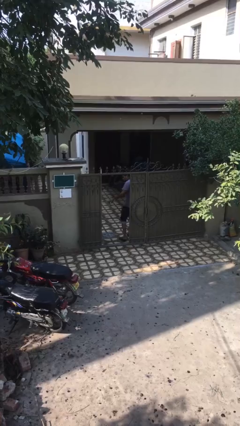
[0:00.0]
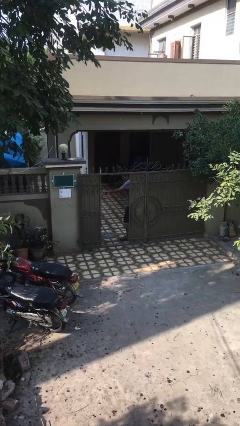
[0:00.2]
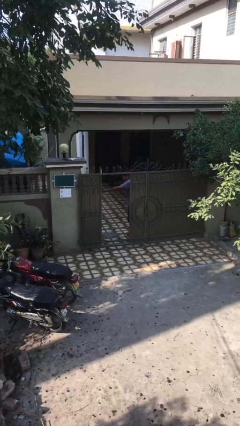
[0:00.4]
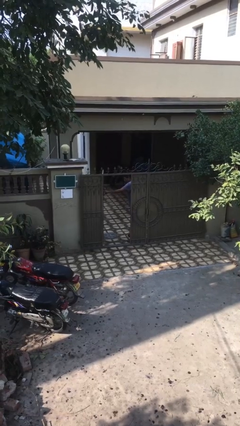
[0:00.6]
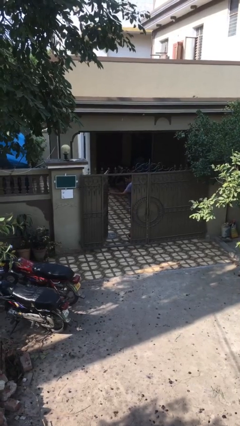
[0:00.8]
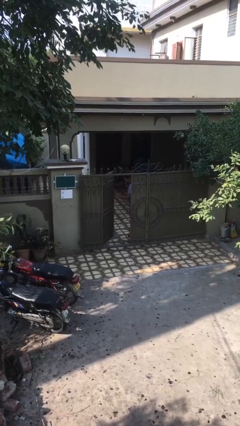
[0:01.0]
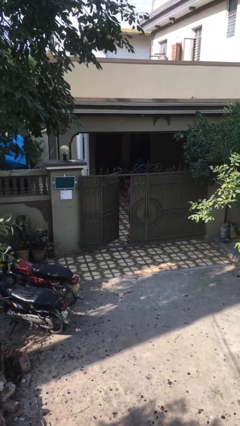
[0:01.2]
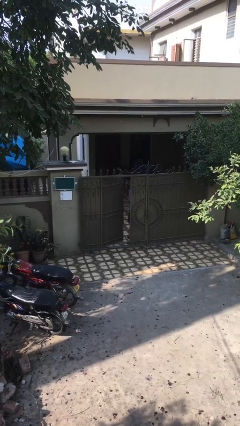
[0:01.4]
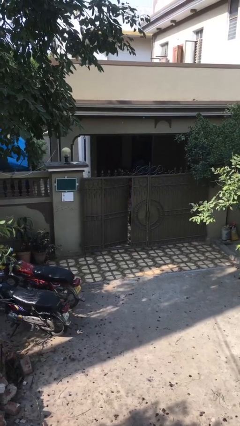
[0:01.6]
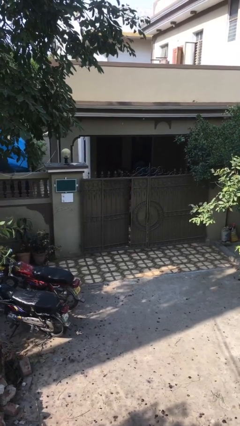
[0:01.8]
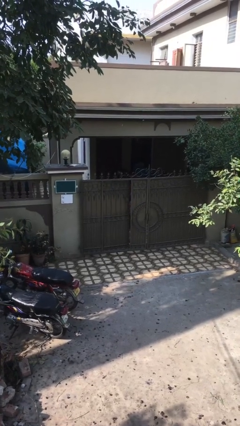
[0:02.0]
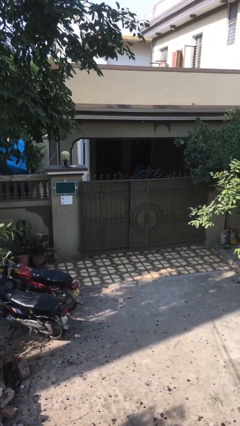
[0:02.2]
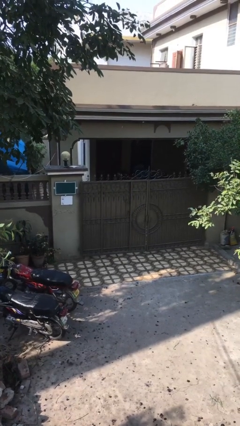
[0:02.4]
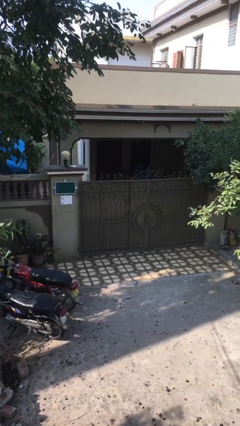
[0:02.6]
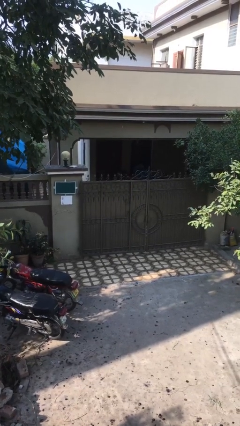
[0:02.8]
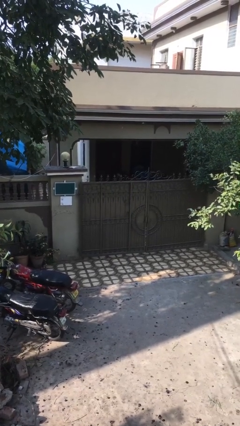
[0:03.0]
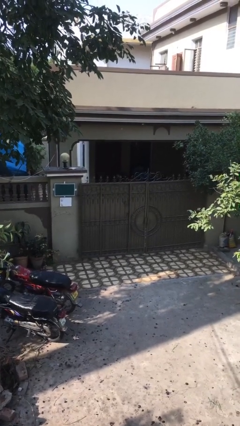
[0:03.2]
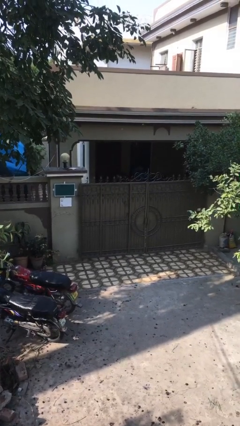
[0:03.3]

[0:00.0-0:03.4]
person closes facility door

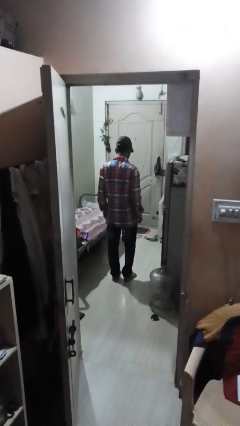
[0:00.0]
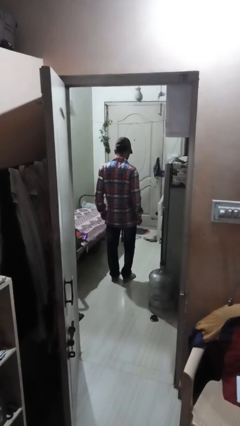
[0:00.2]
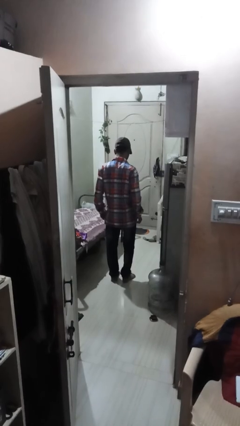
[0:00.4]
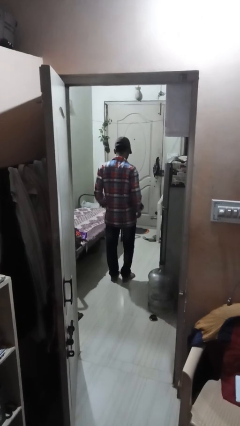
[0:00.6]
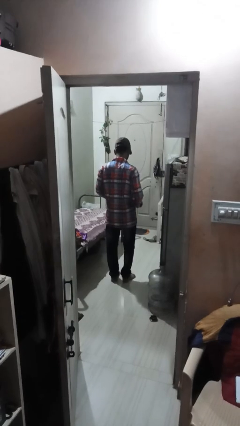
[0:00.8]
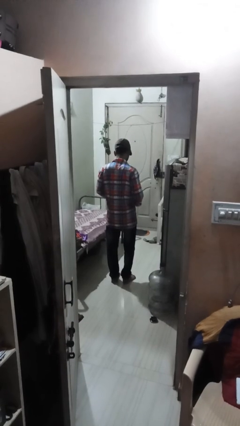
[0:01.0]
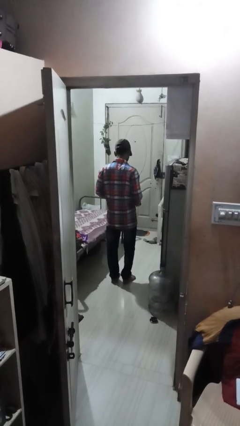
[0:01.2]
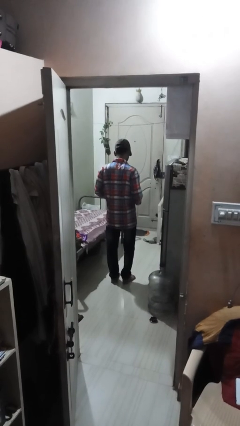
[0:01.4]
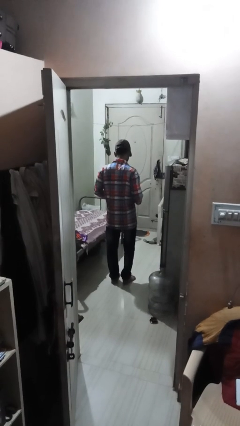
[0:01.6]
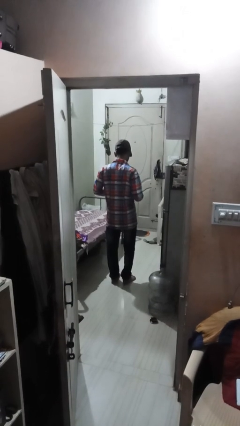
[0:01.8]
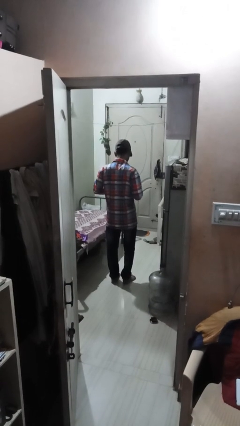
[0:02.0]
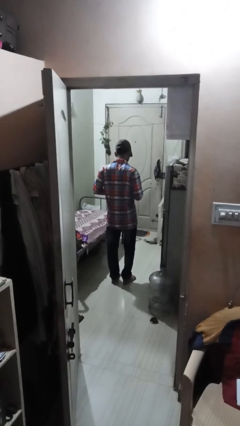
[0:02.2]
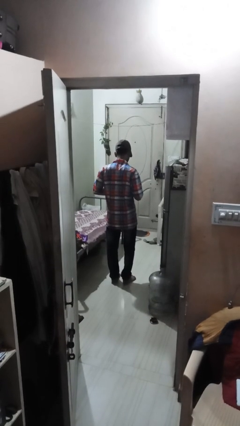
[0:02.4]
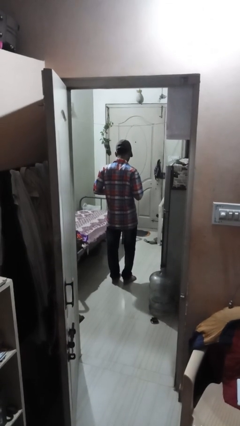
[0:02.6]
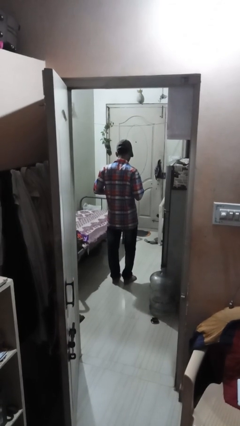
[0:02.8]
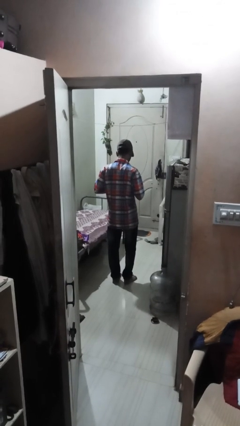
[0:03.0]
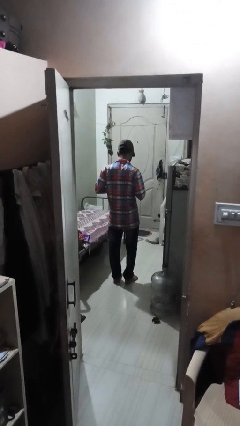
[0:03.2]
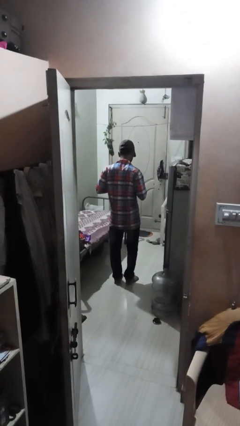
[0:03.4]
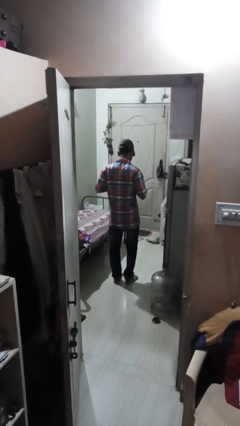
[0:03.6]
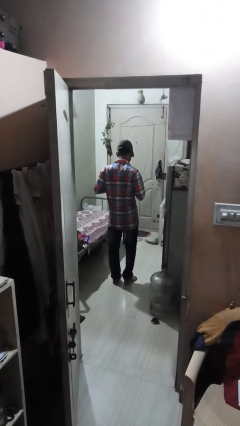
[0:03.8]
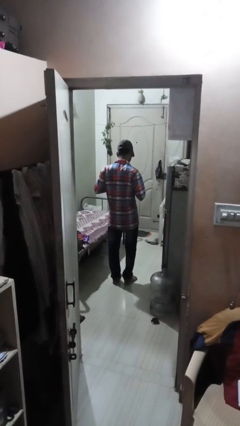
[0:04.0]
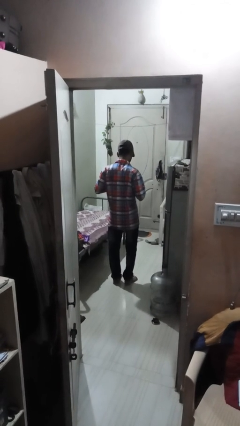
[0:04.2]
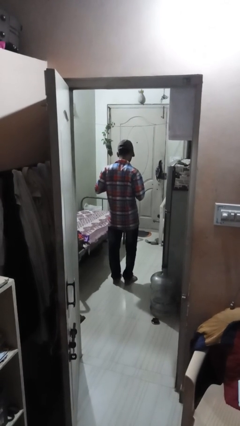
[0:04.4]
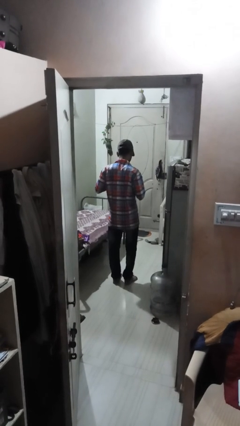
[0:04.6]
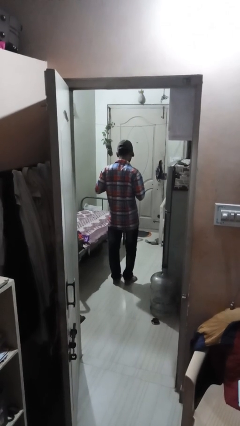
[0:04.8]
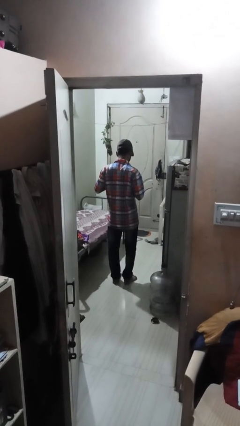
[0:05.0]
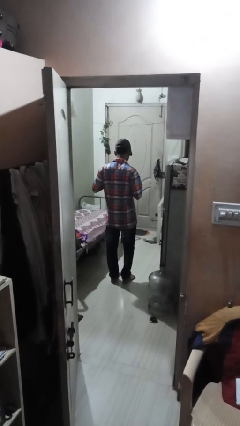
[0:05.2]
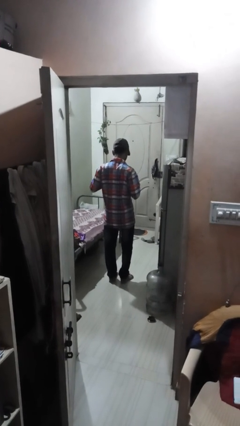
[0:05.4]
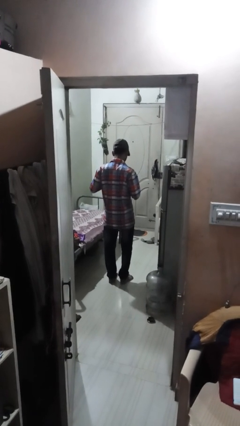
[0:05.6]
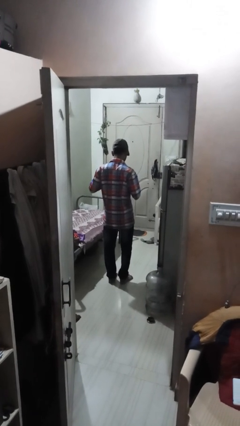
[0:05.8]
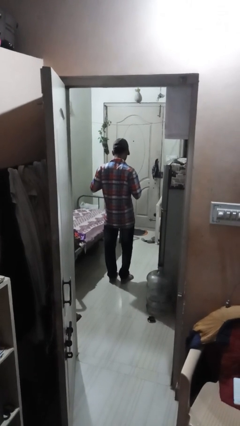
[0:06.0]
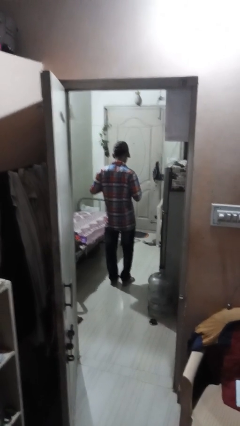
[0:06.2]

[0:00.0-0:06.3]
person buttons shirt

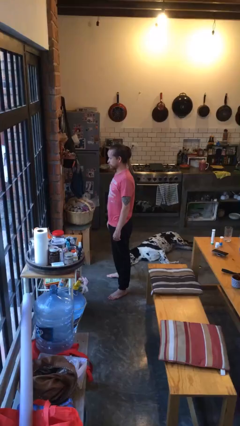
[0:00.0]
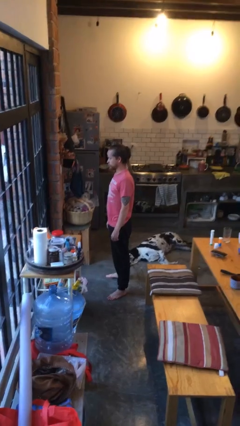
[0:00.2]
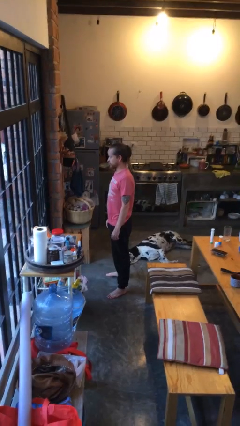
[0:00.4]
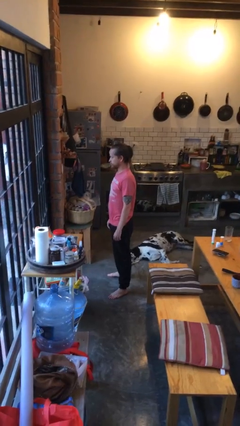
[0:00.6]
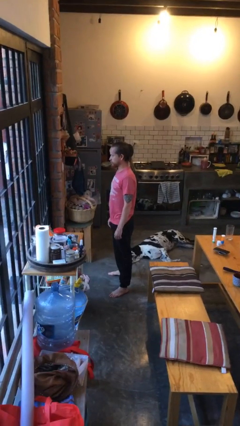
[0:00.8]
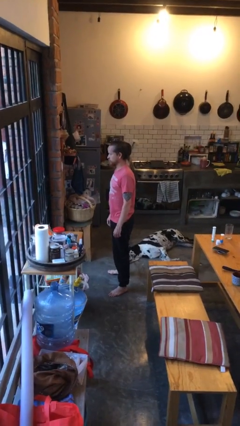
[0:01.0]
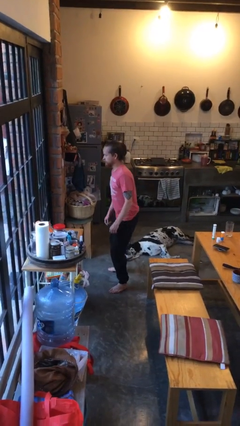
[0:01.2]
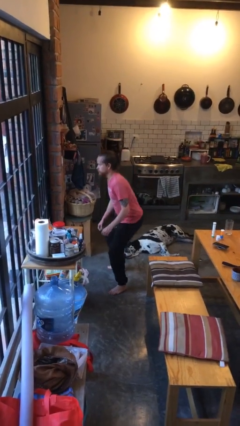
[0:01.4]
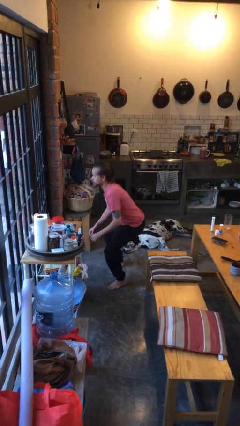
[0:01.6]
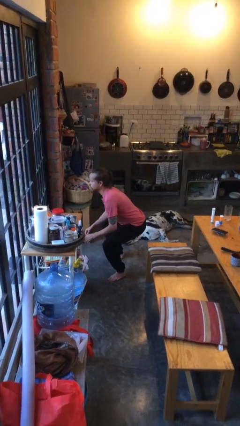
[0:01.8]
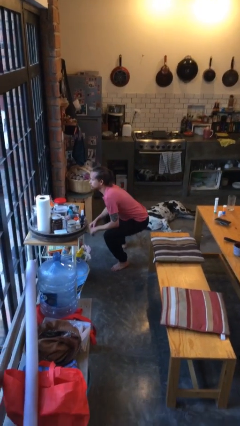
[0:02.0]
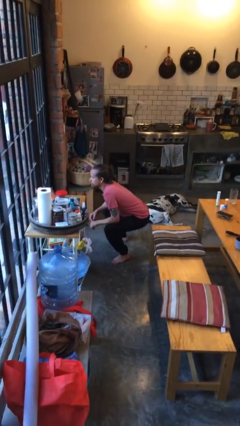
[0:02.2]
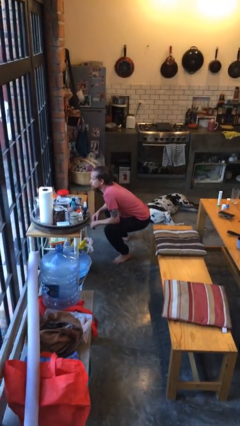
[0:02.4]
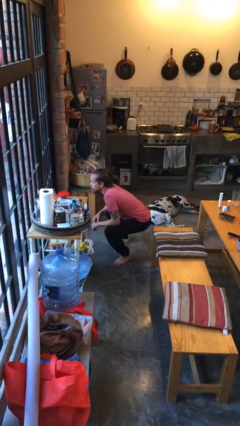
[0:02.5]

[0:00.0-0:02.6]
person squats

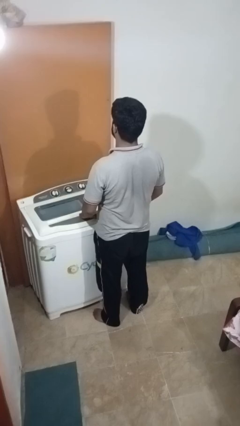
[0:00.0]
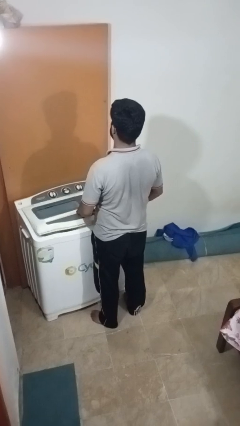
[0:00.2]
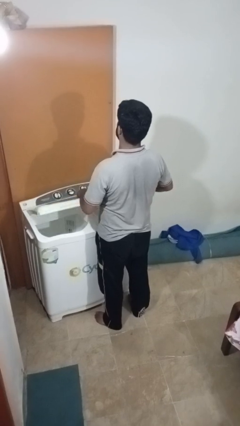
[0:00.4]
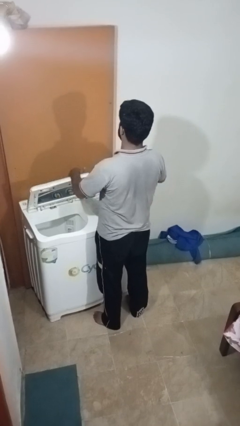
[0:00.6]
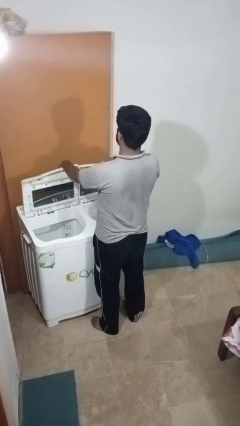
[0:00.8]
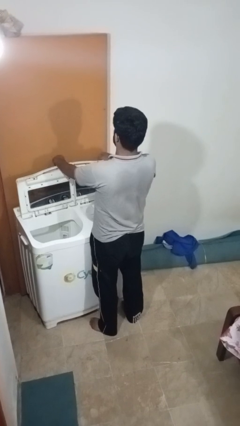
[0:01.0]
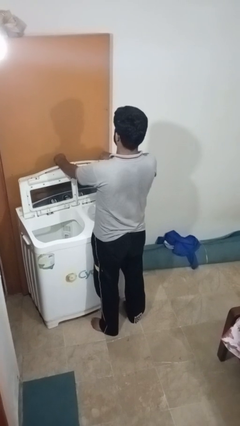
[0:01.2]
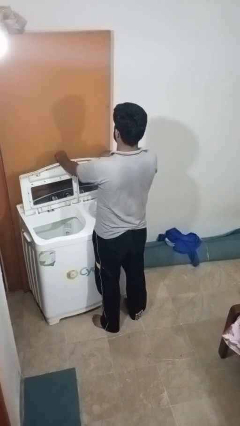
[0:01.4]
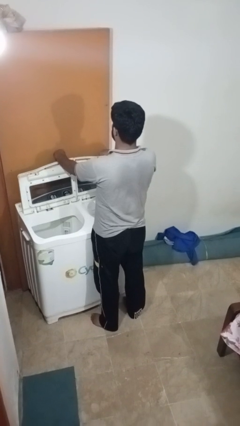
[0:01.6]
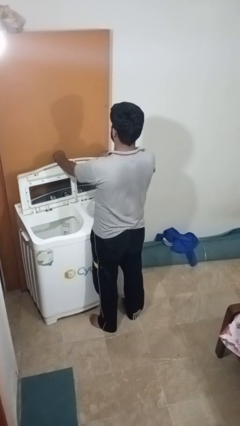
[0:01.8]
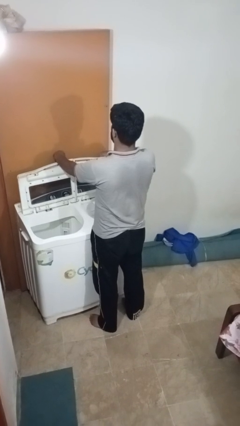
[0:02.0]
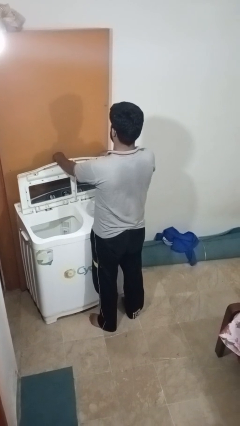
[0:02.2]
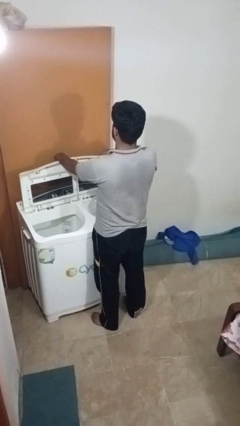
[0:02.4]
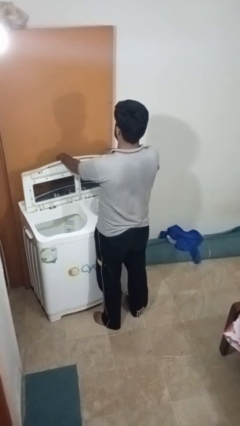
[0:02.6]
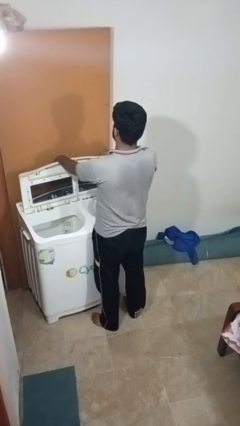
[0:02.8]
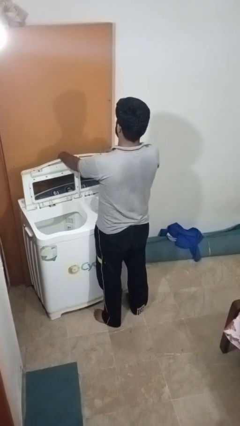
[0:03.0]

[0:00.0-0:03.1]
person opens clothes washer

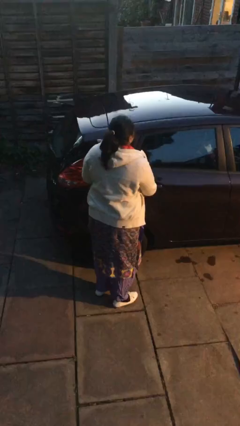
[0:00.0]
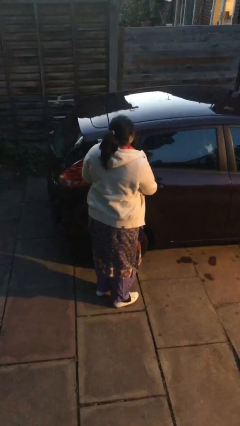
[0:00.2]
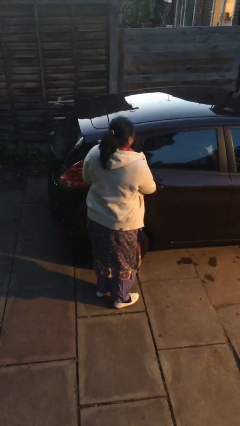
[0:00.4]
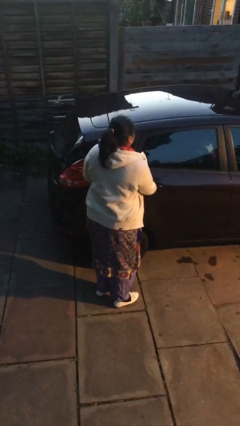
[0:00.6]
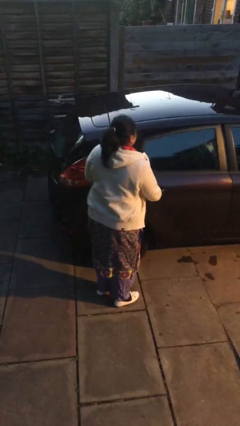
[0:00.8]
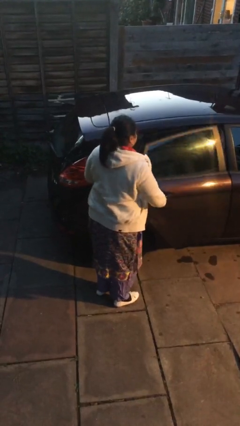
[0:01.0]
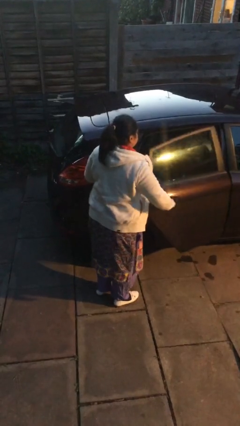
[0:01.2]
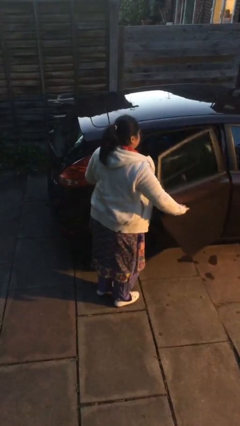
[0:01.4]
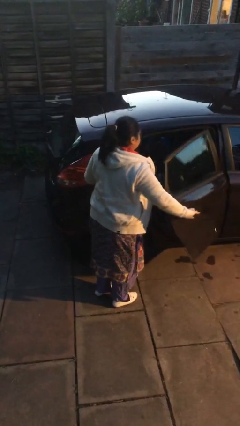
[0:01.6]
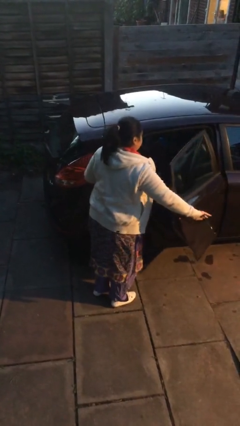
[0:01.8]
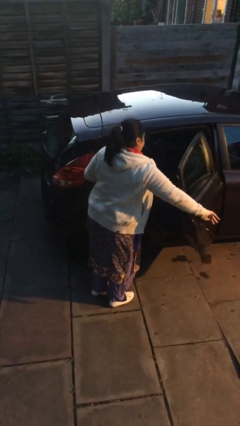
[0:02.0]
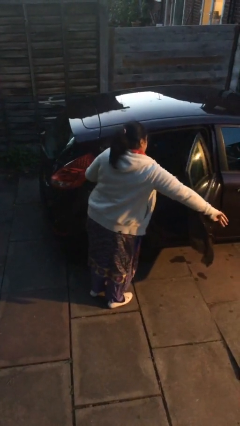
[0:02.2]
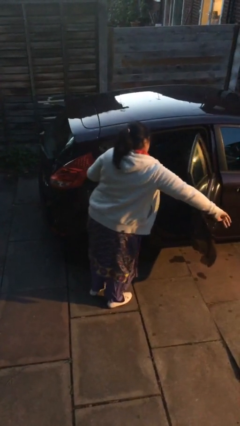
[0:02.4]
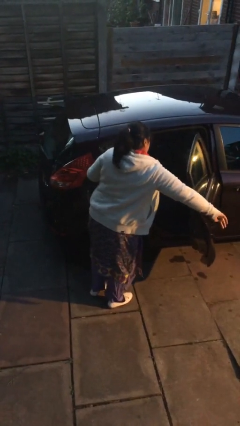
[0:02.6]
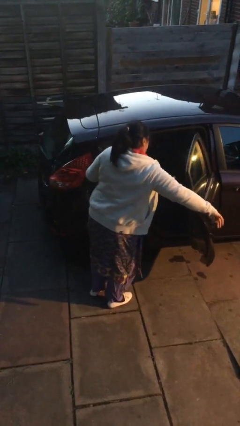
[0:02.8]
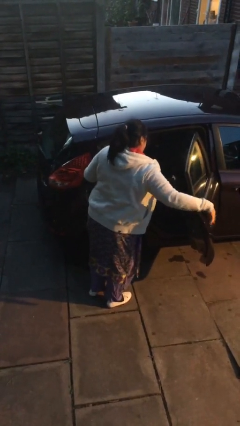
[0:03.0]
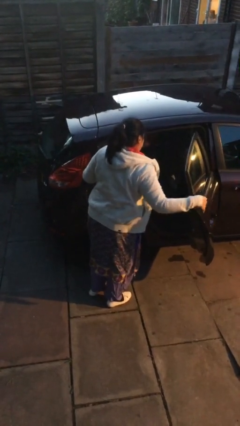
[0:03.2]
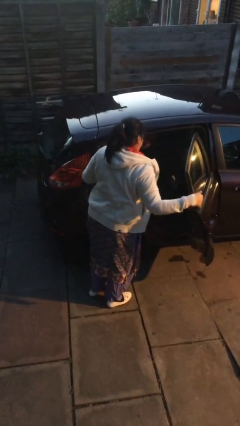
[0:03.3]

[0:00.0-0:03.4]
person opens car door
